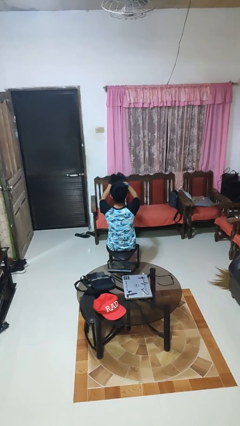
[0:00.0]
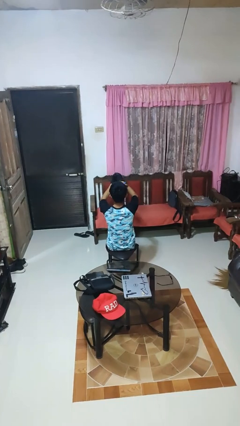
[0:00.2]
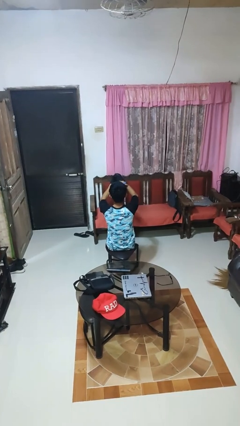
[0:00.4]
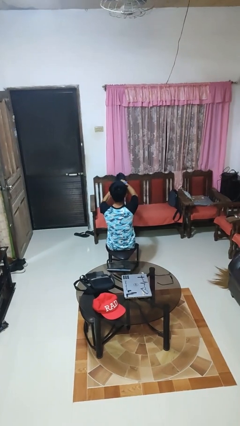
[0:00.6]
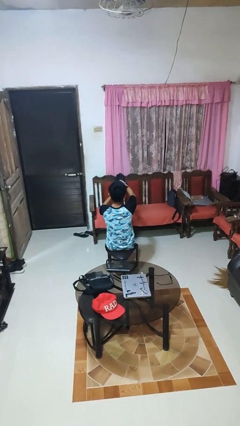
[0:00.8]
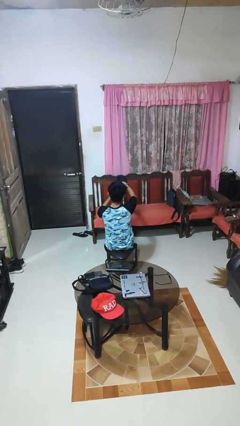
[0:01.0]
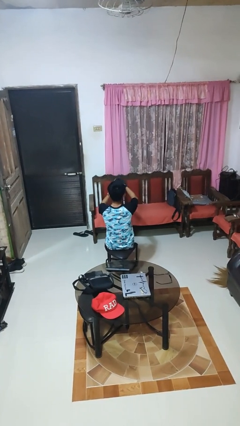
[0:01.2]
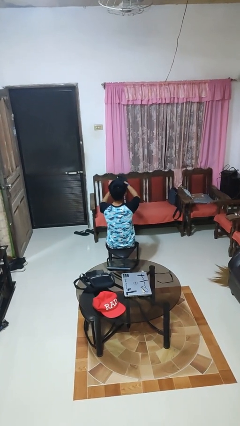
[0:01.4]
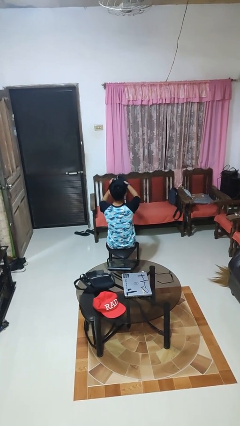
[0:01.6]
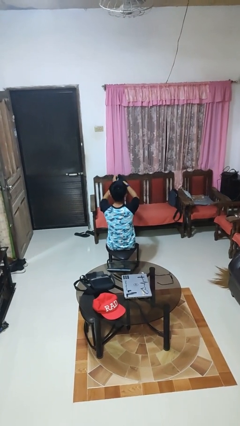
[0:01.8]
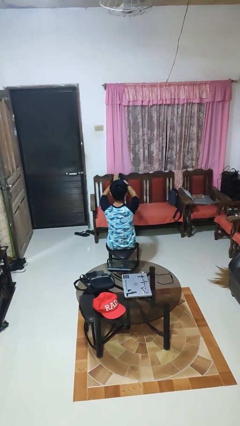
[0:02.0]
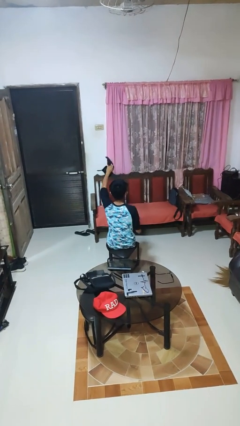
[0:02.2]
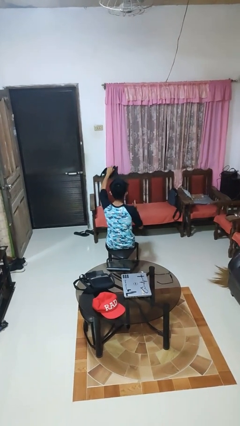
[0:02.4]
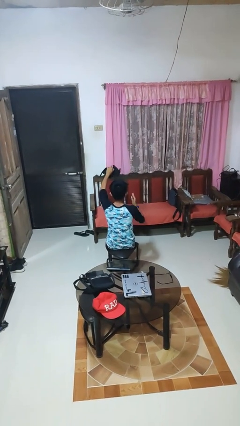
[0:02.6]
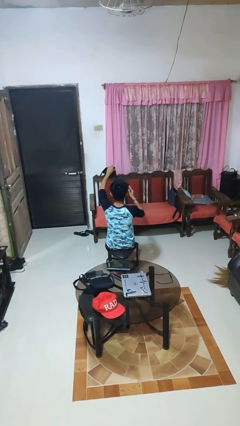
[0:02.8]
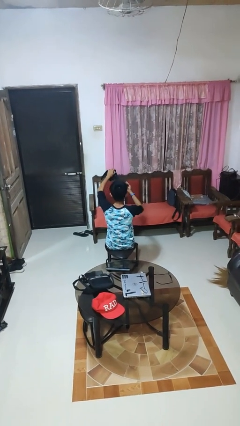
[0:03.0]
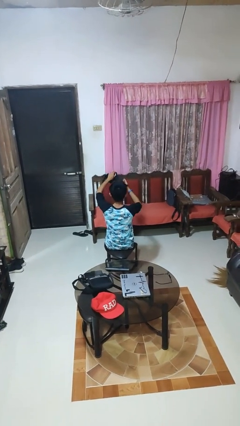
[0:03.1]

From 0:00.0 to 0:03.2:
person takes off gloves

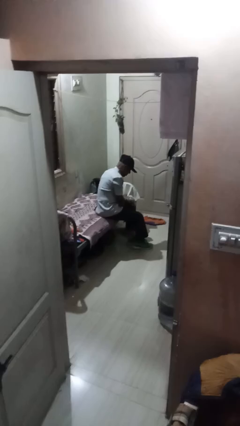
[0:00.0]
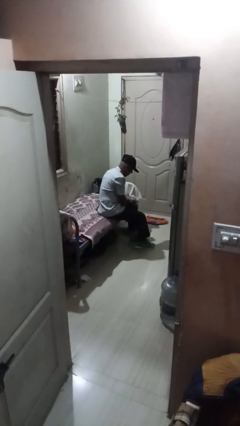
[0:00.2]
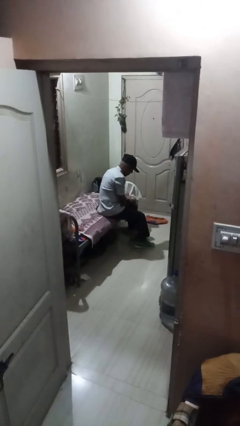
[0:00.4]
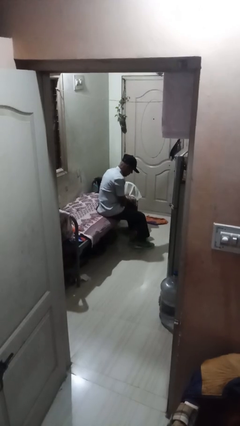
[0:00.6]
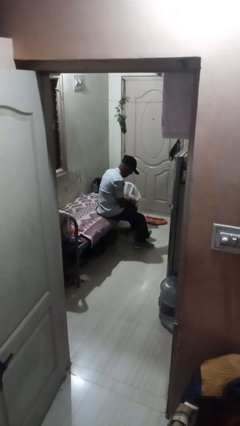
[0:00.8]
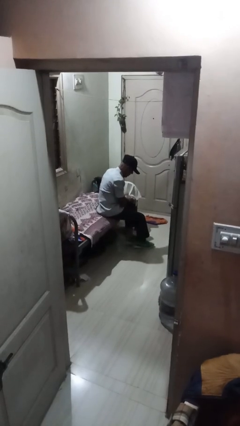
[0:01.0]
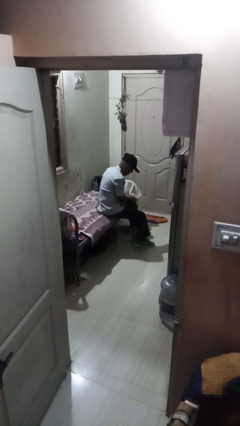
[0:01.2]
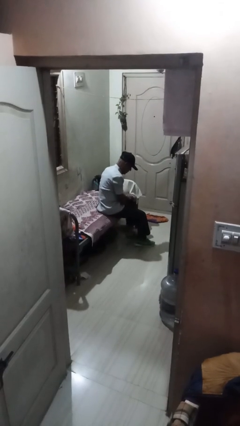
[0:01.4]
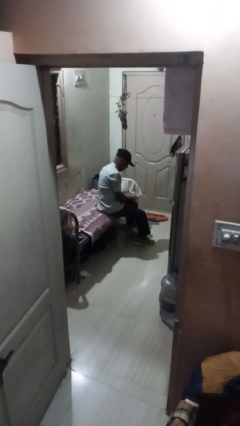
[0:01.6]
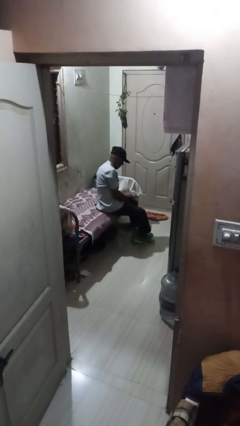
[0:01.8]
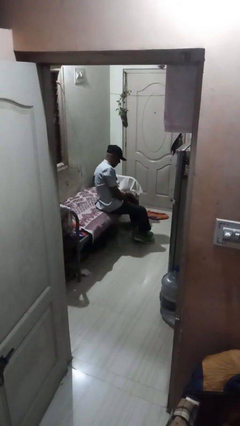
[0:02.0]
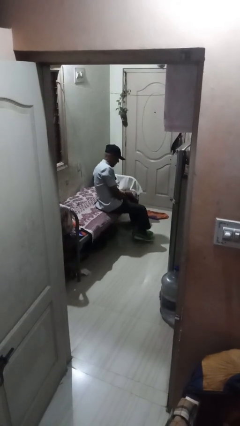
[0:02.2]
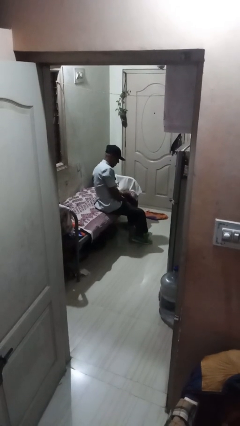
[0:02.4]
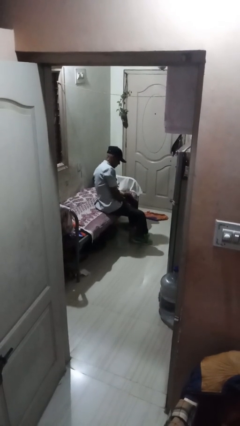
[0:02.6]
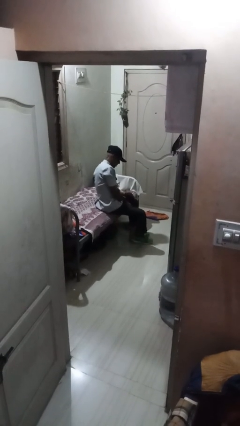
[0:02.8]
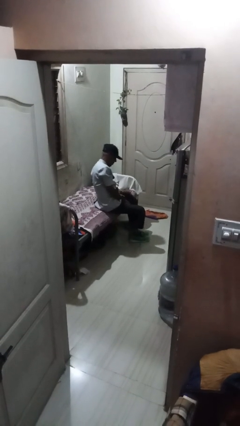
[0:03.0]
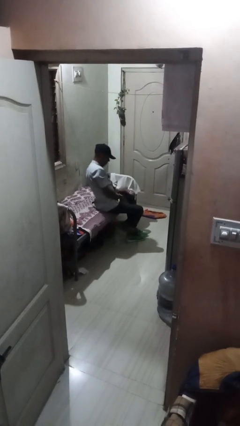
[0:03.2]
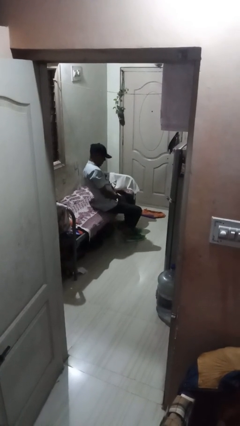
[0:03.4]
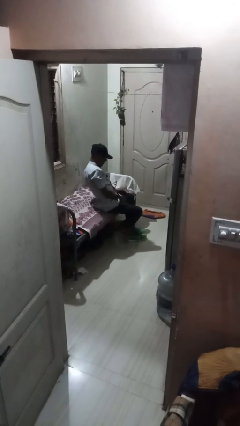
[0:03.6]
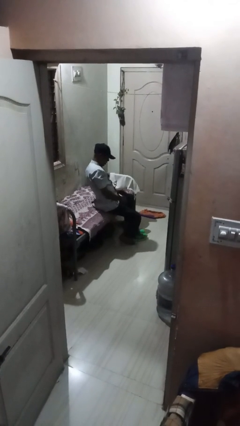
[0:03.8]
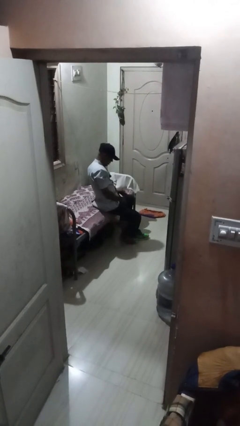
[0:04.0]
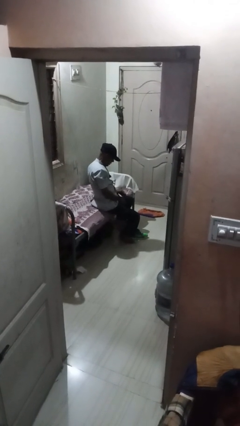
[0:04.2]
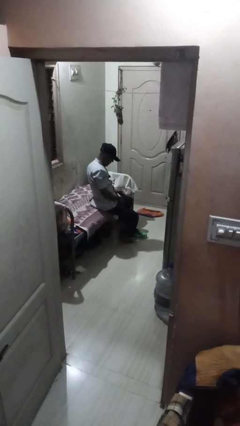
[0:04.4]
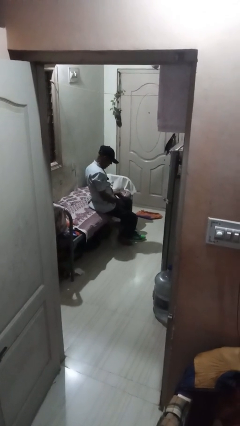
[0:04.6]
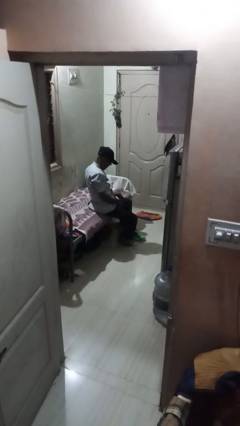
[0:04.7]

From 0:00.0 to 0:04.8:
person takes off shoes

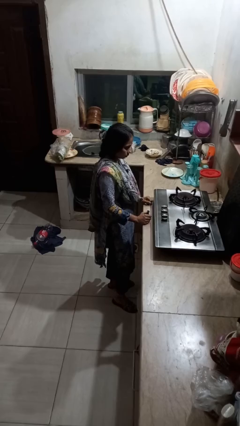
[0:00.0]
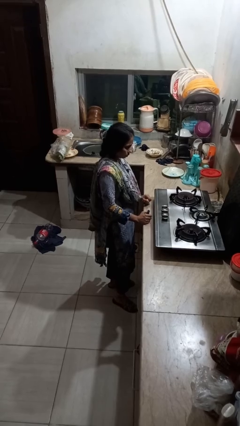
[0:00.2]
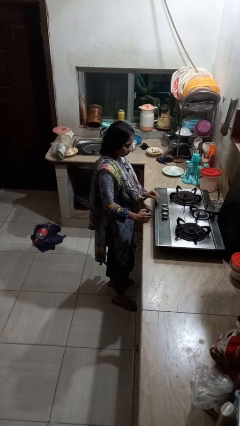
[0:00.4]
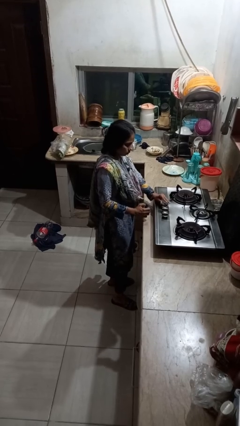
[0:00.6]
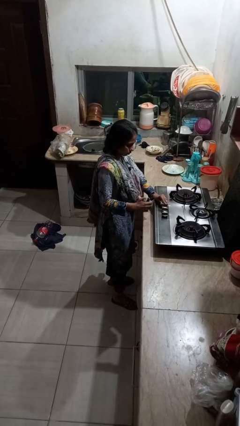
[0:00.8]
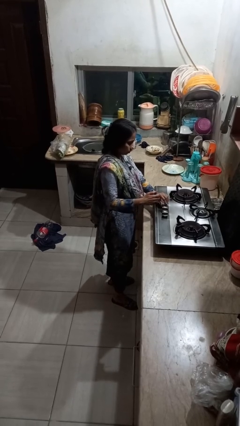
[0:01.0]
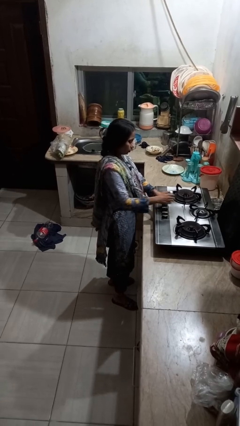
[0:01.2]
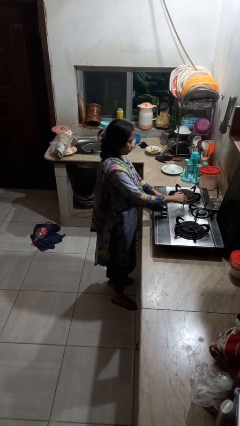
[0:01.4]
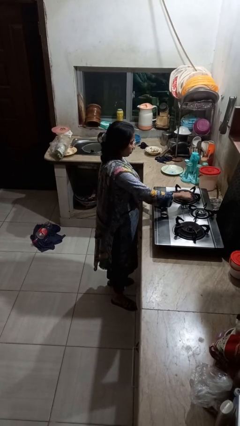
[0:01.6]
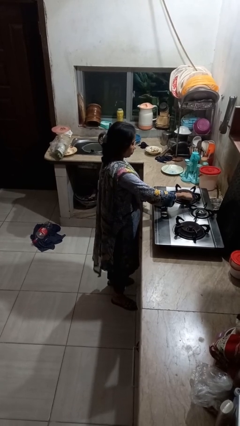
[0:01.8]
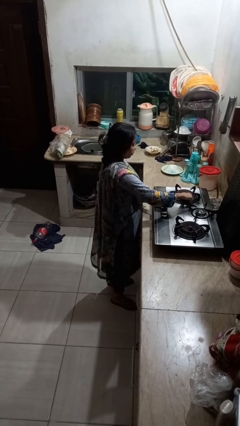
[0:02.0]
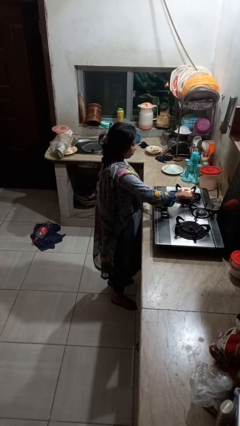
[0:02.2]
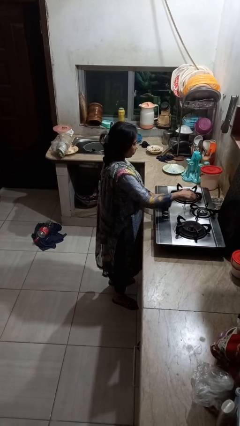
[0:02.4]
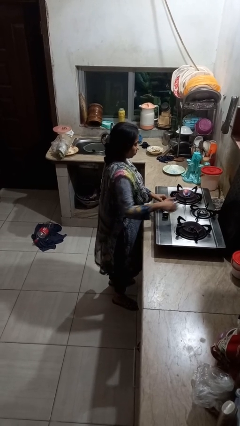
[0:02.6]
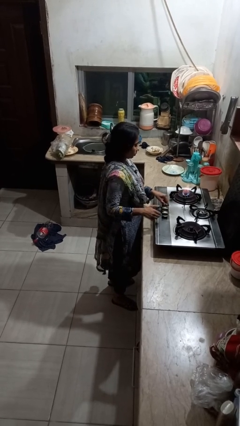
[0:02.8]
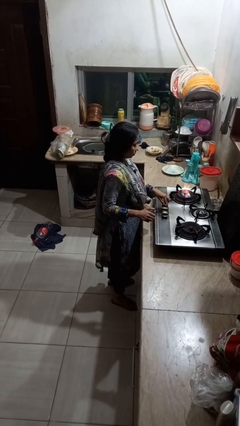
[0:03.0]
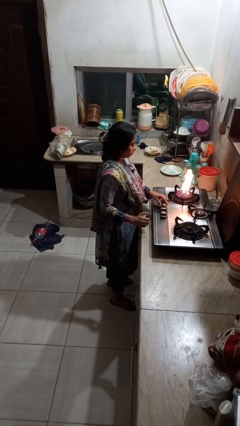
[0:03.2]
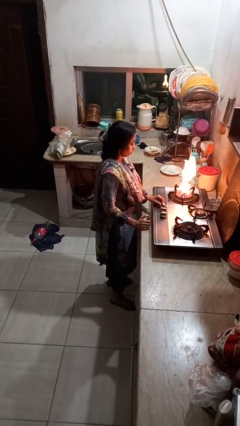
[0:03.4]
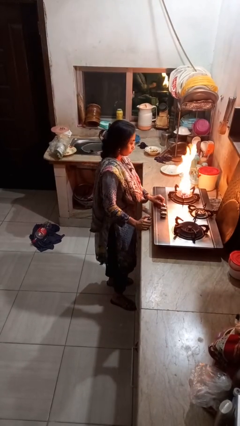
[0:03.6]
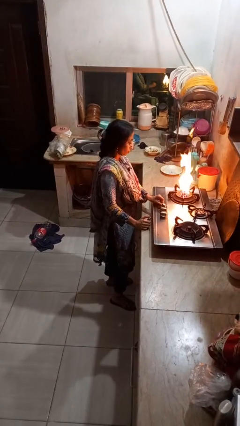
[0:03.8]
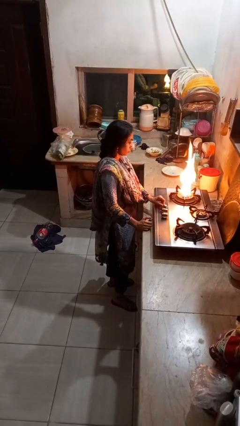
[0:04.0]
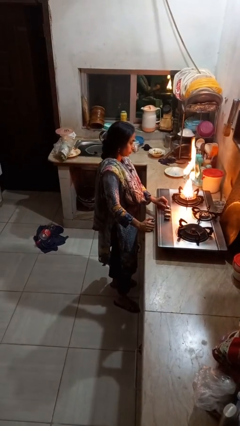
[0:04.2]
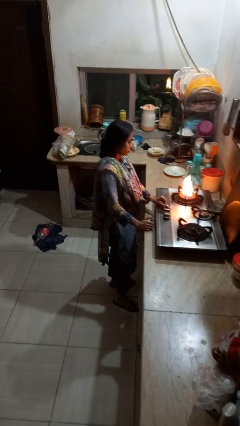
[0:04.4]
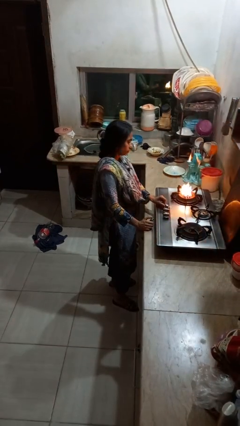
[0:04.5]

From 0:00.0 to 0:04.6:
person turns on stovetop

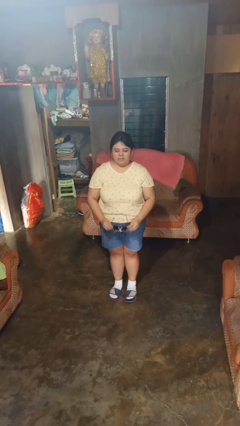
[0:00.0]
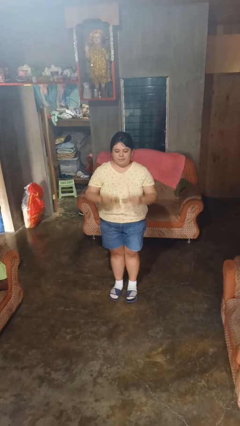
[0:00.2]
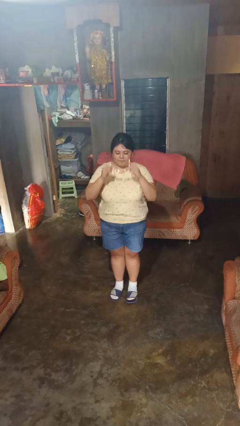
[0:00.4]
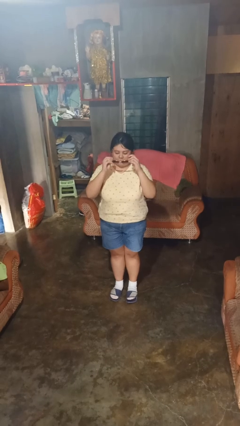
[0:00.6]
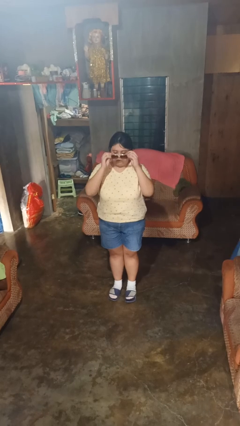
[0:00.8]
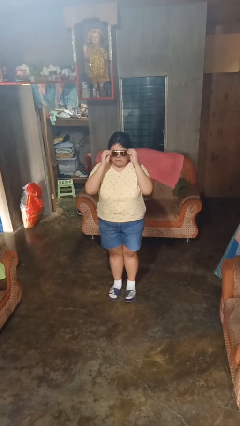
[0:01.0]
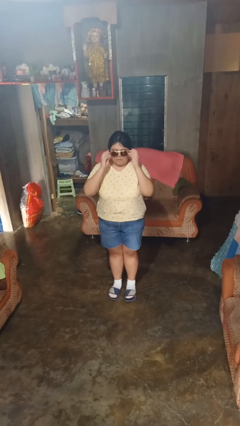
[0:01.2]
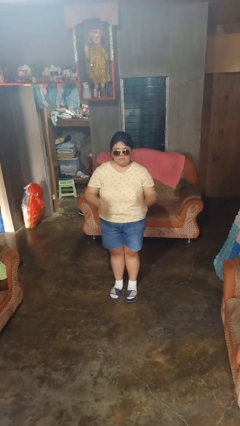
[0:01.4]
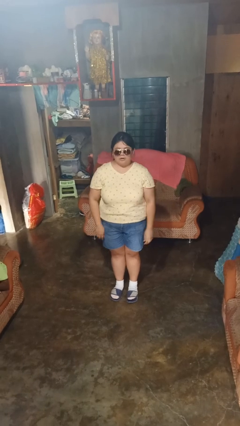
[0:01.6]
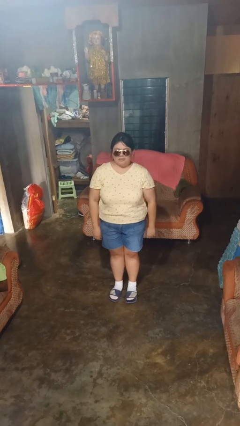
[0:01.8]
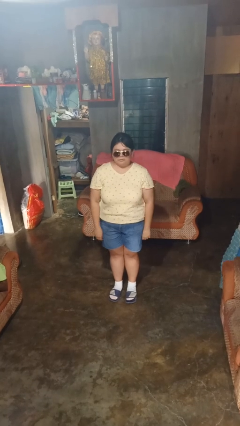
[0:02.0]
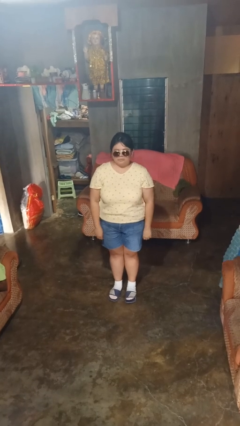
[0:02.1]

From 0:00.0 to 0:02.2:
person puts on sunglasses

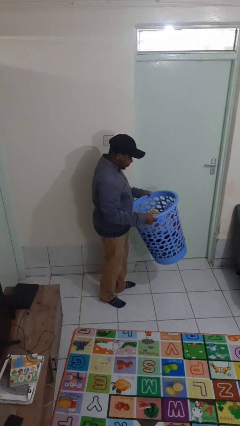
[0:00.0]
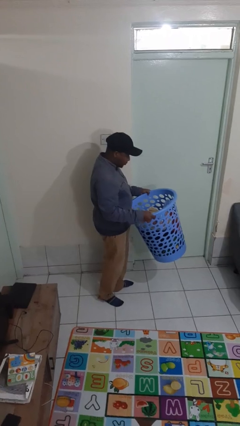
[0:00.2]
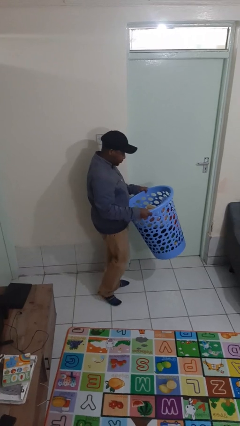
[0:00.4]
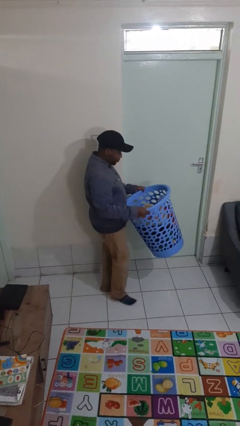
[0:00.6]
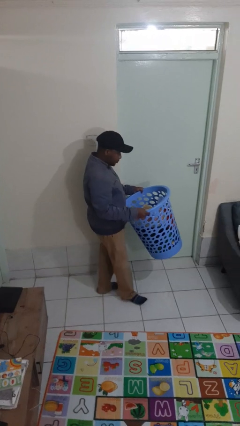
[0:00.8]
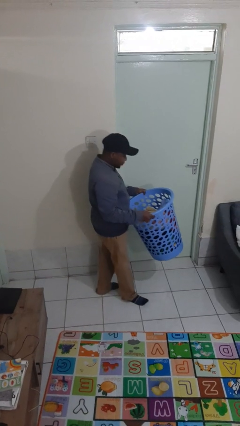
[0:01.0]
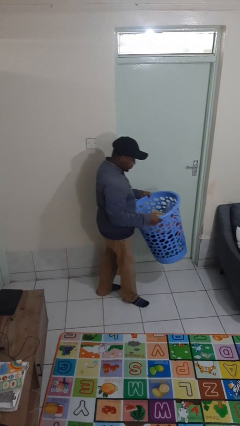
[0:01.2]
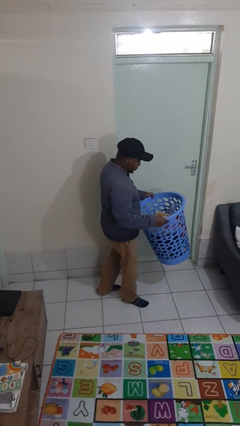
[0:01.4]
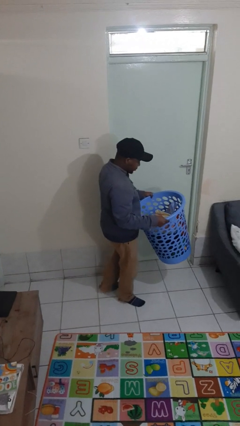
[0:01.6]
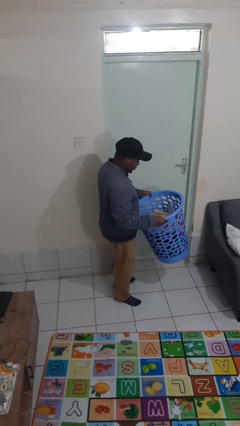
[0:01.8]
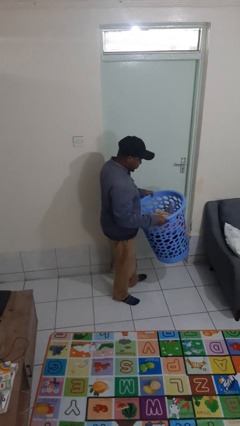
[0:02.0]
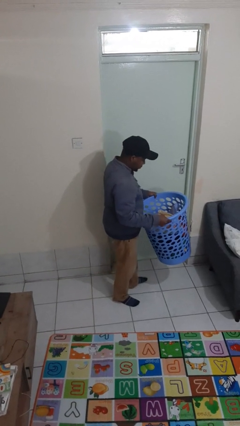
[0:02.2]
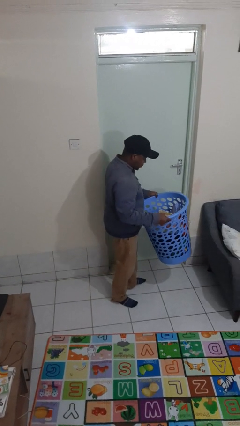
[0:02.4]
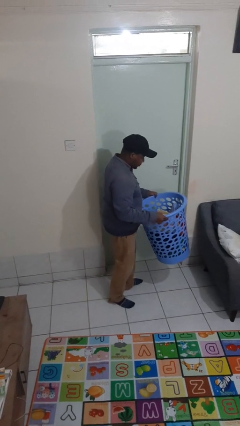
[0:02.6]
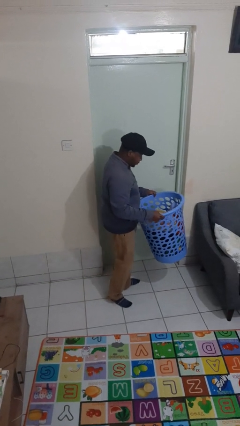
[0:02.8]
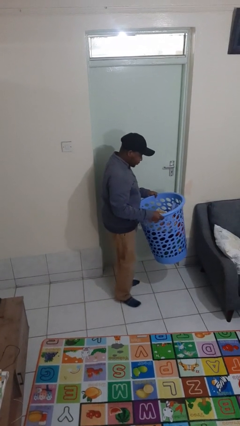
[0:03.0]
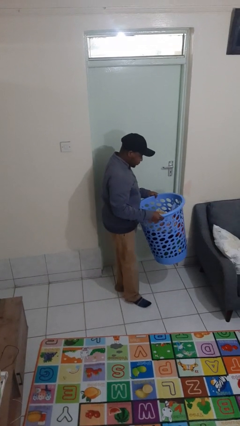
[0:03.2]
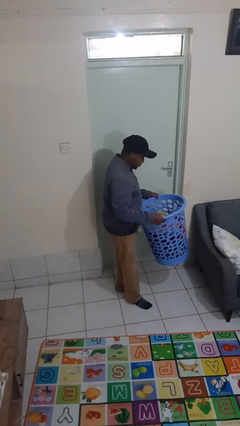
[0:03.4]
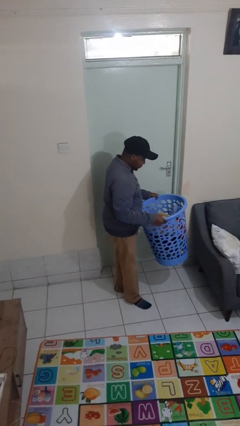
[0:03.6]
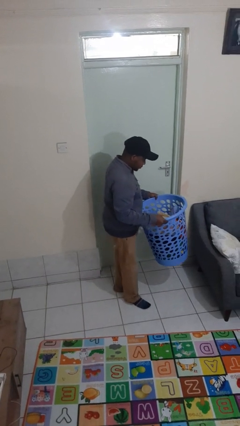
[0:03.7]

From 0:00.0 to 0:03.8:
person carries laundry basket
